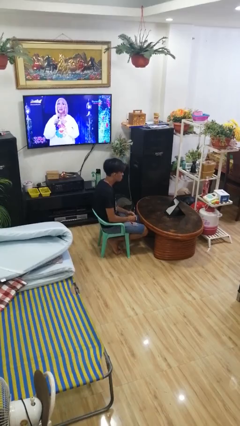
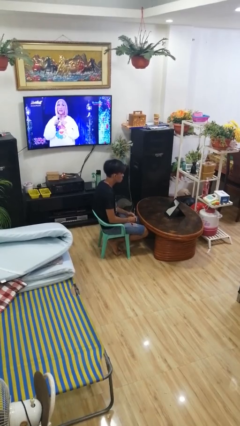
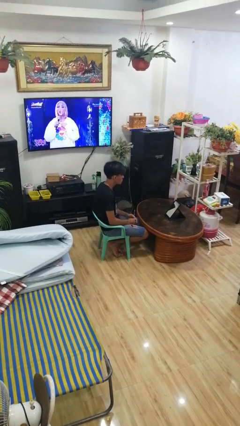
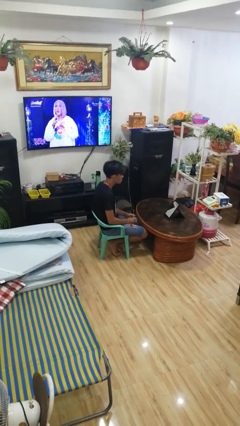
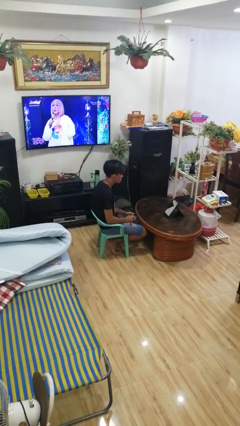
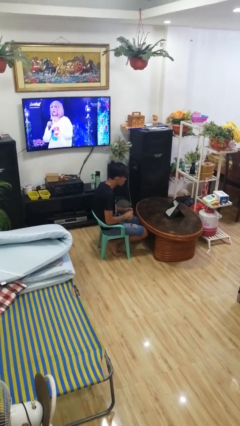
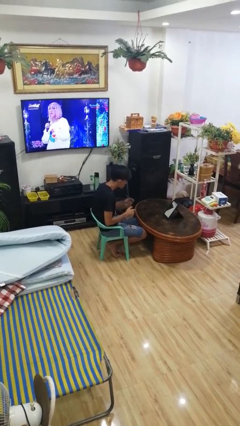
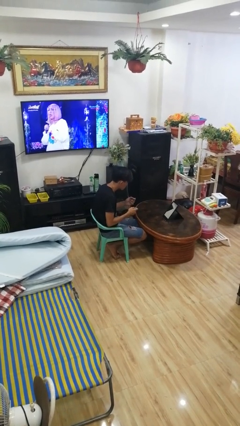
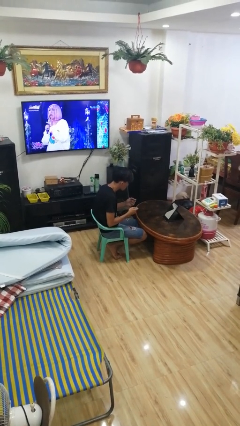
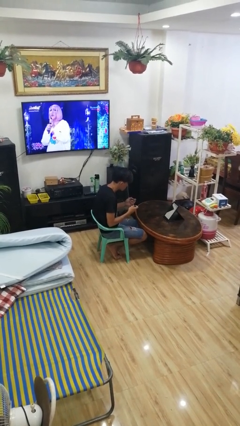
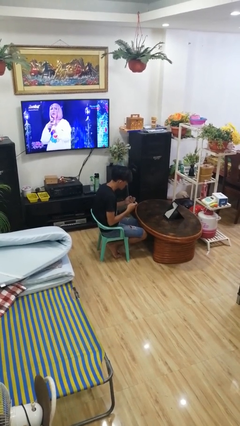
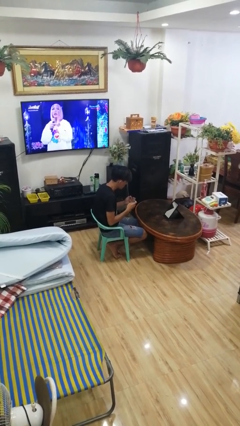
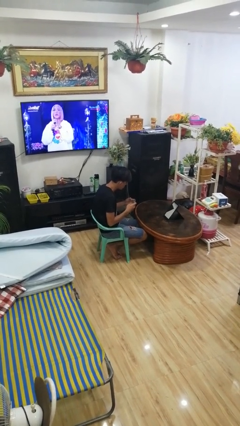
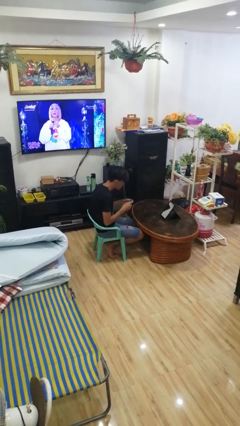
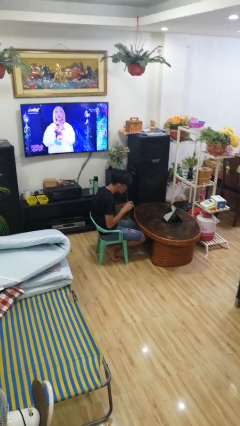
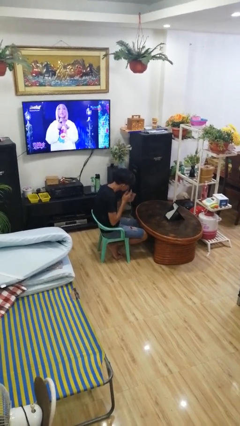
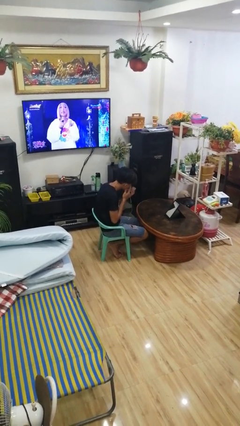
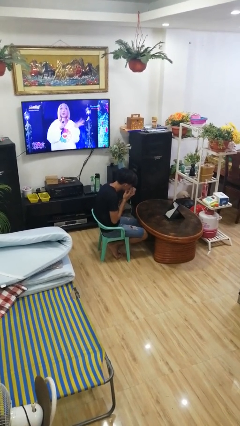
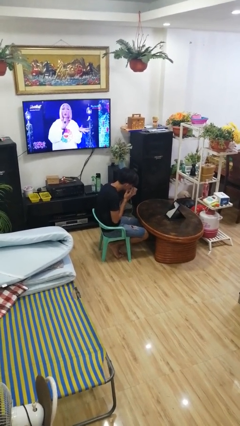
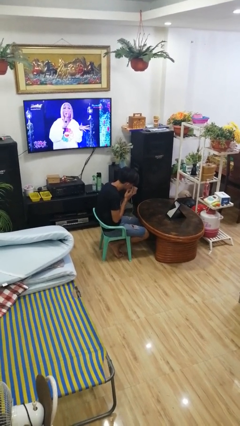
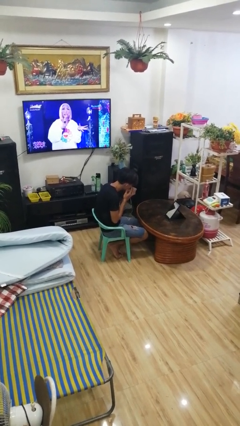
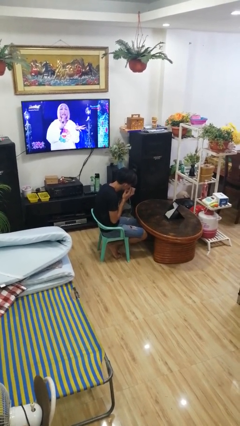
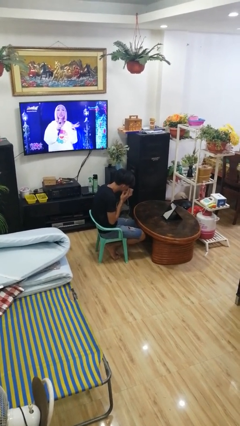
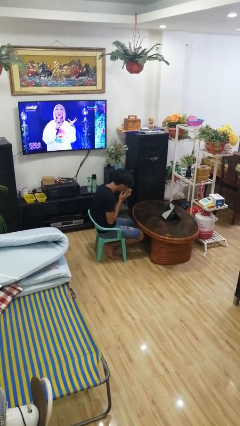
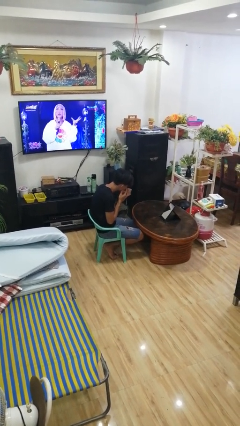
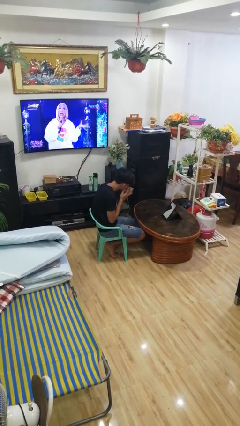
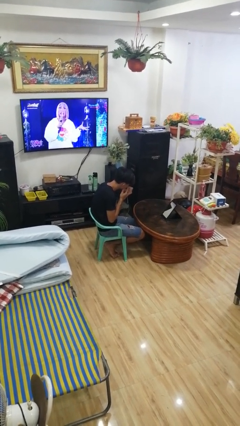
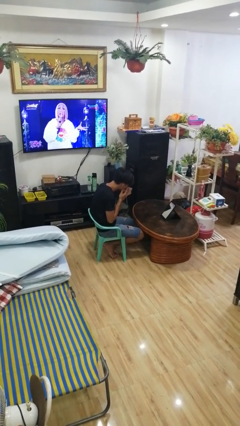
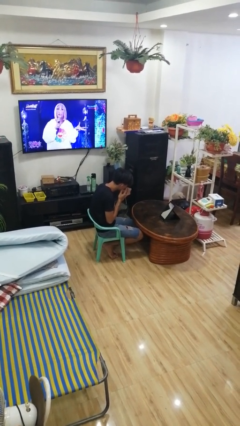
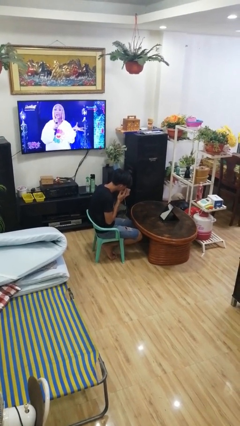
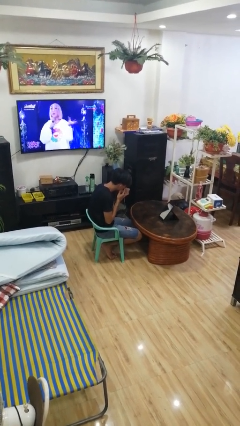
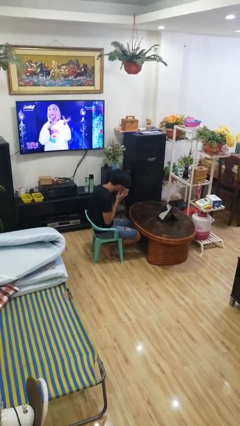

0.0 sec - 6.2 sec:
person applies eye makeup

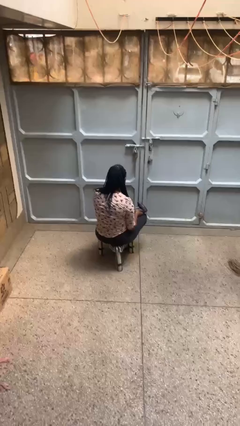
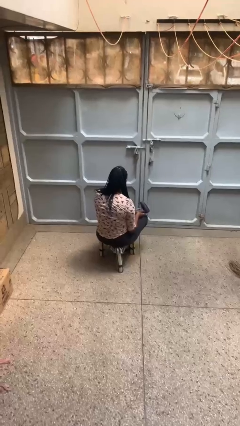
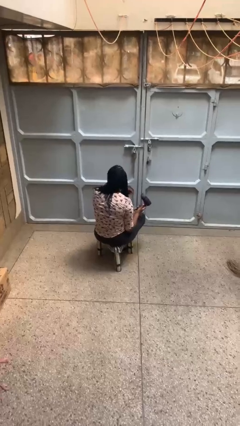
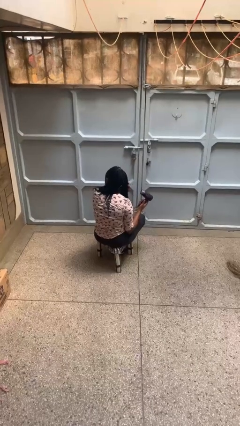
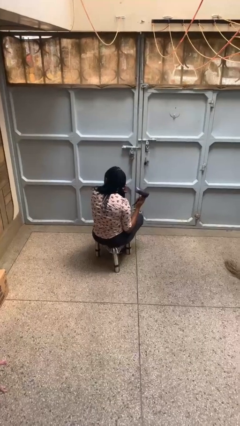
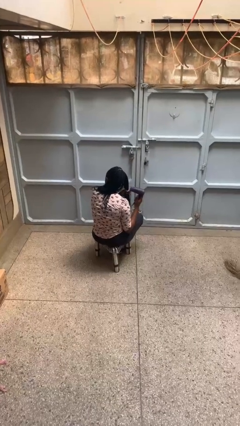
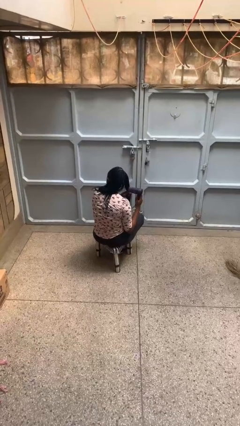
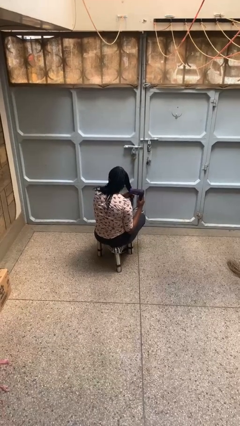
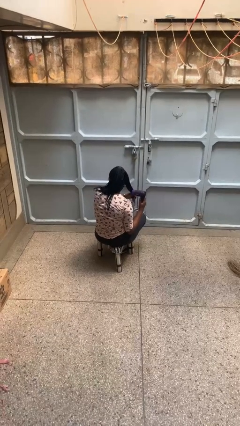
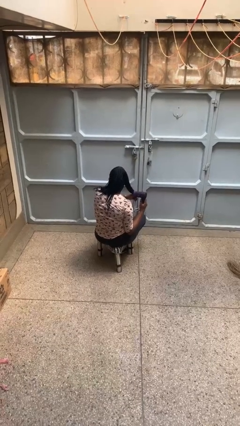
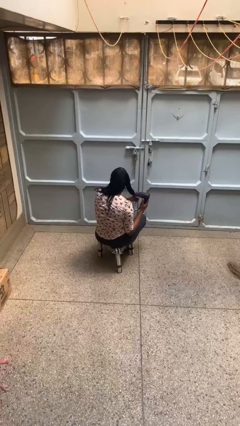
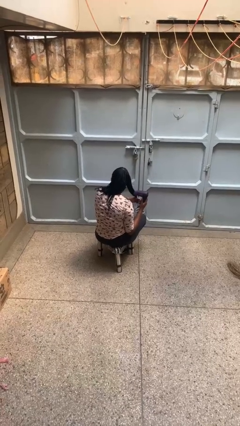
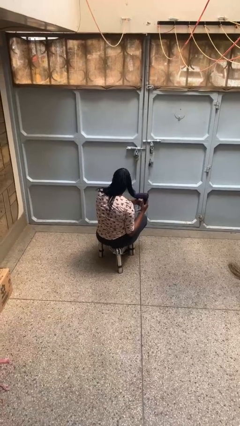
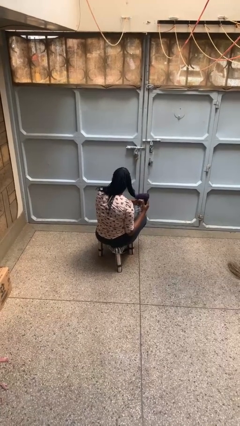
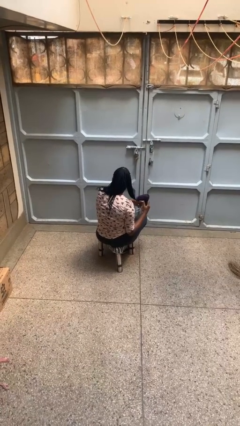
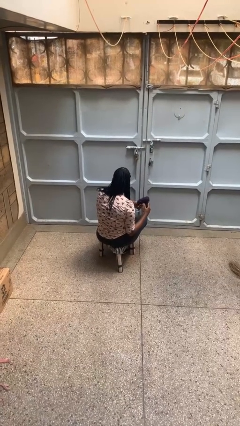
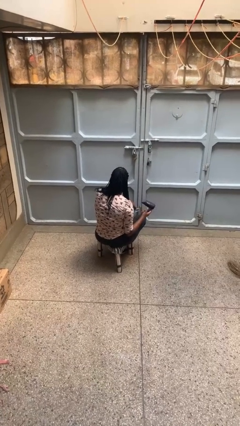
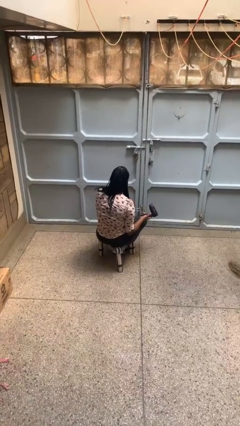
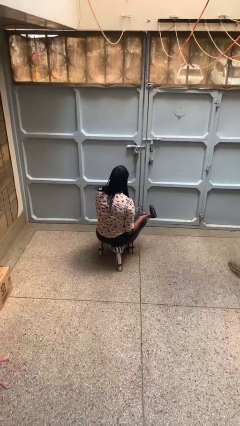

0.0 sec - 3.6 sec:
person dries hair with hairdryer

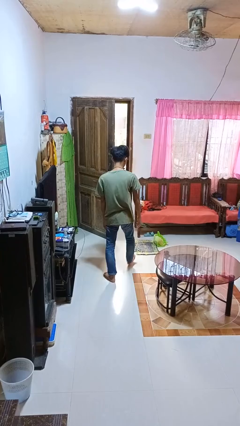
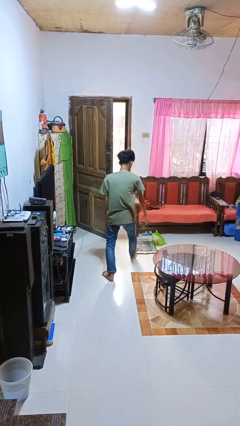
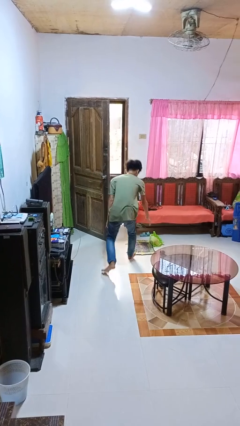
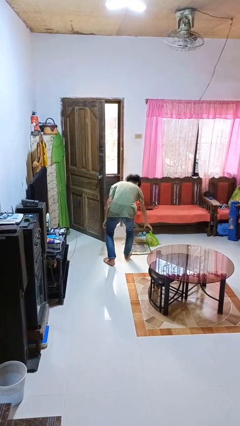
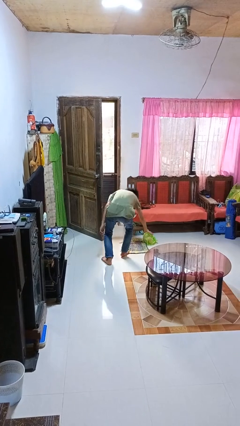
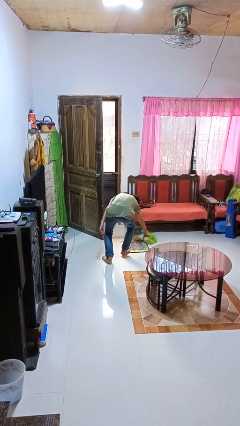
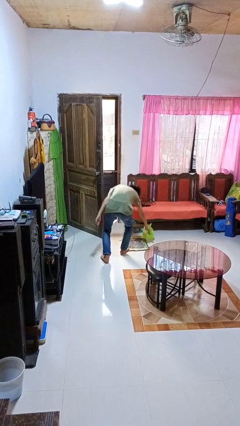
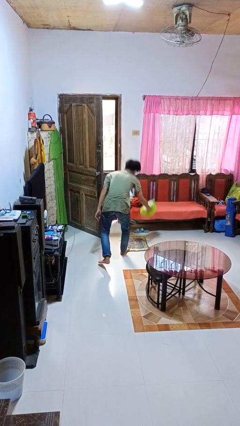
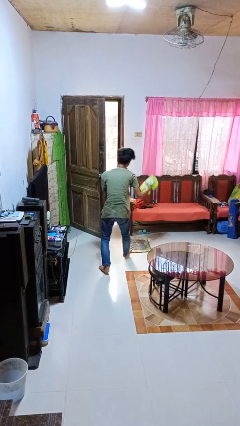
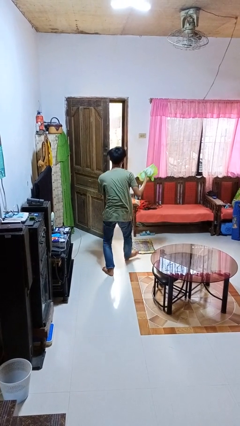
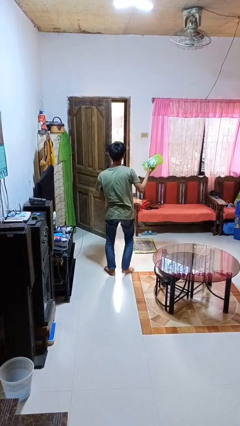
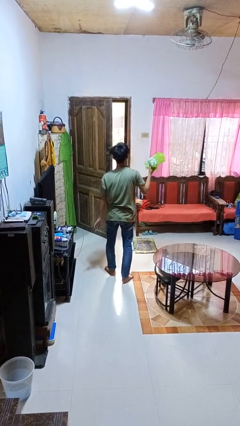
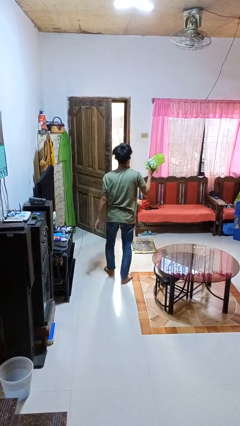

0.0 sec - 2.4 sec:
person picks up object from floor

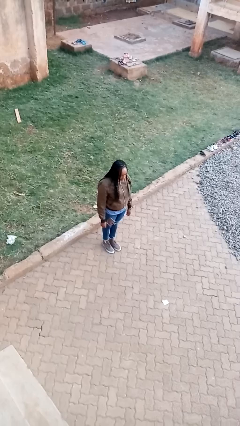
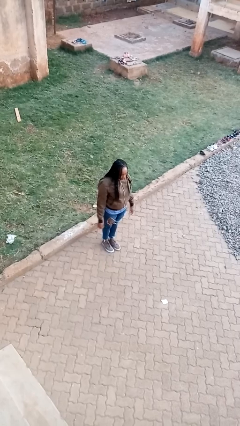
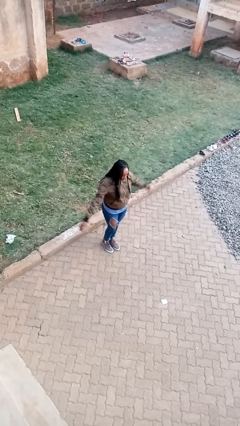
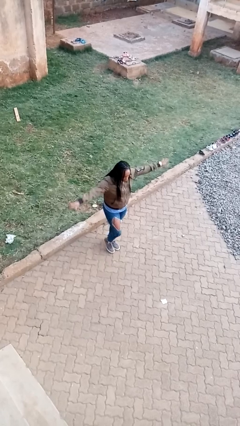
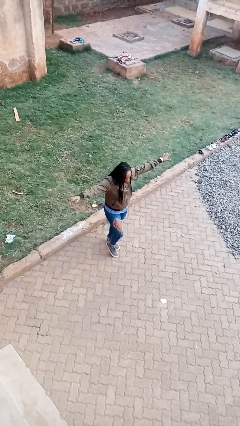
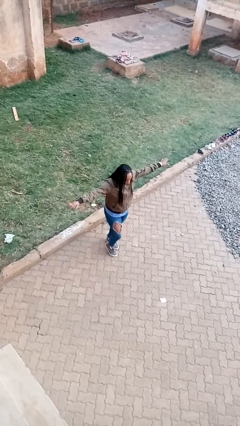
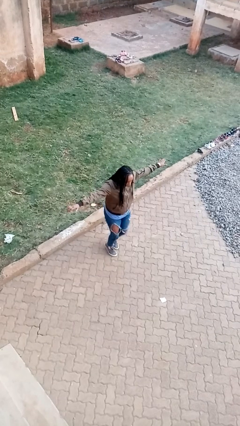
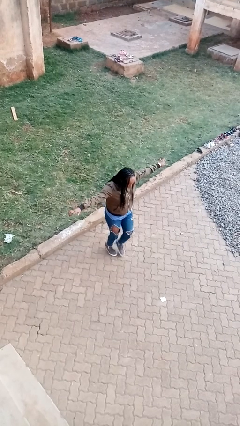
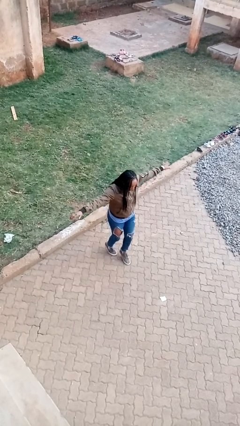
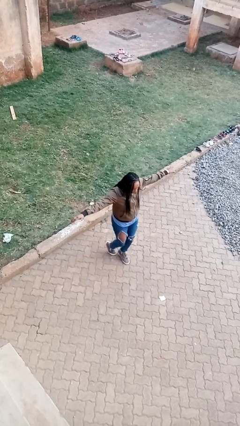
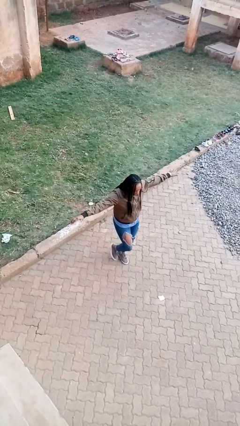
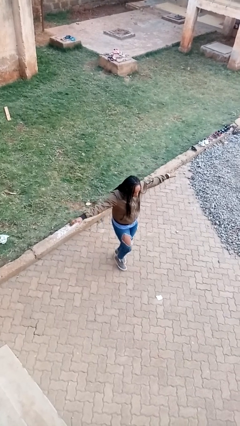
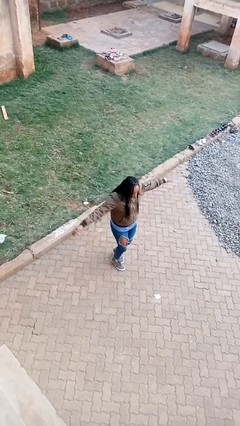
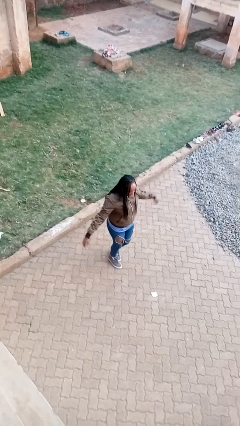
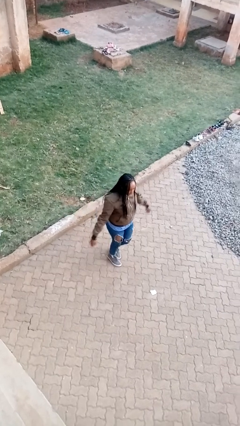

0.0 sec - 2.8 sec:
person walks tiptoe

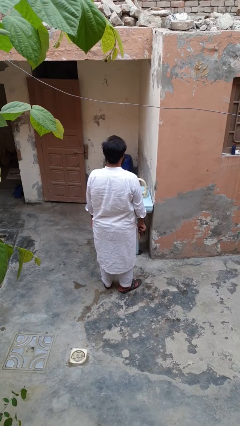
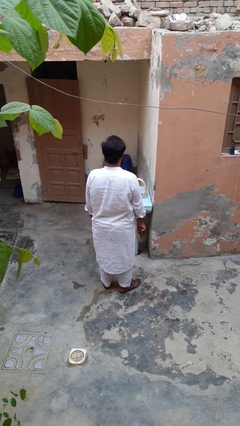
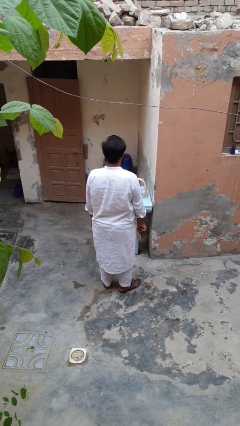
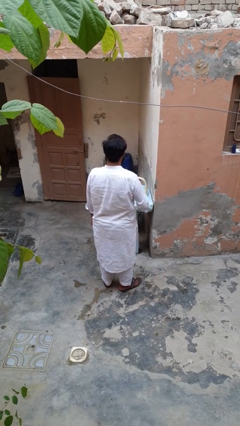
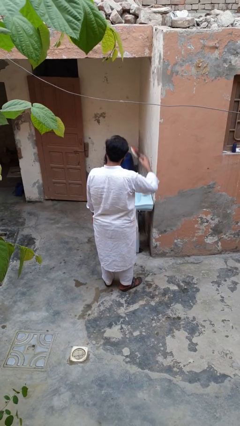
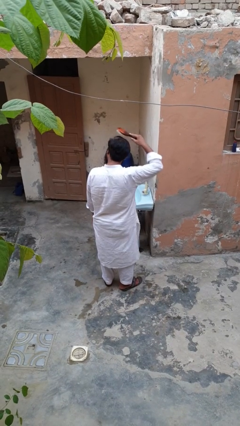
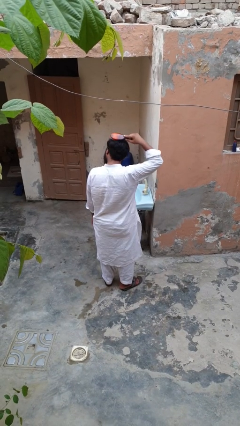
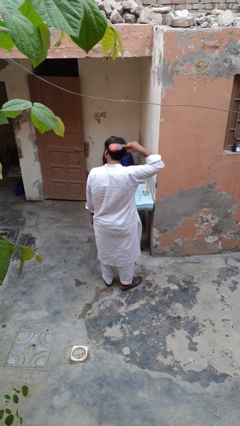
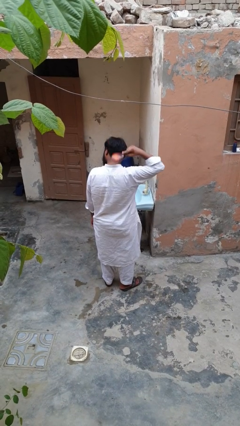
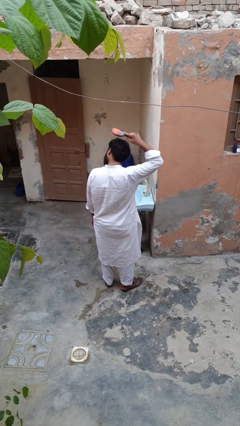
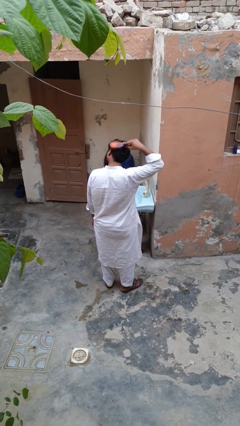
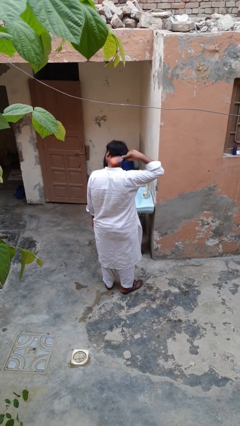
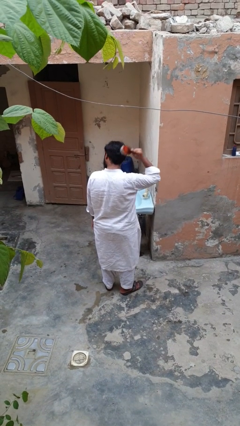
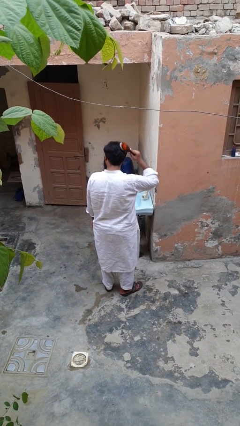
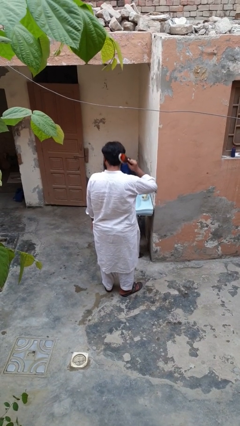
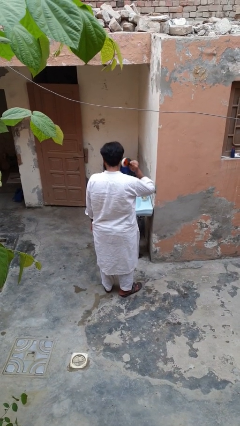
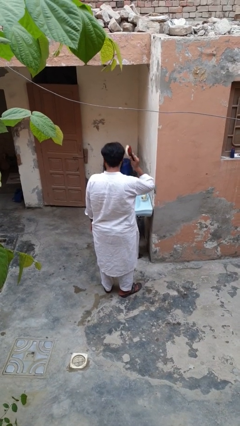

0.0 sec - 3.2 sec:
person brushes hair
